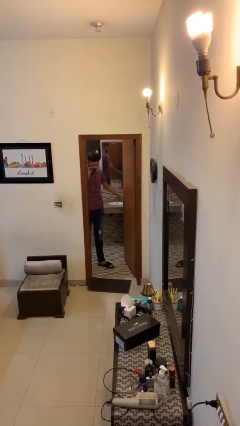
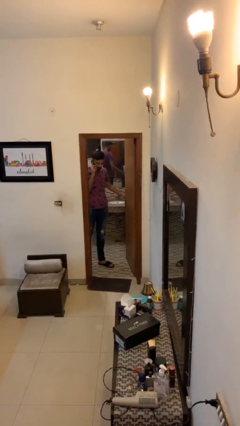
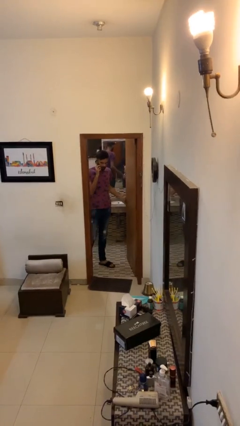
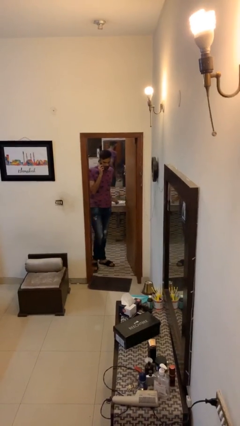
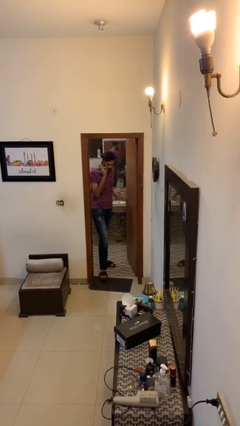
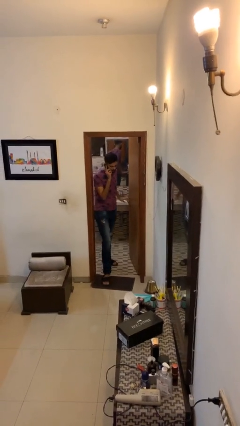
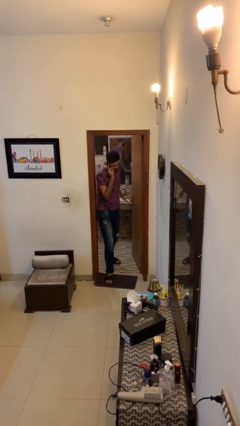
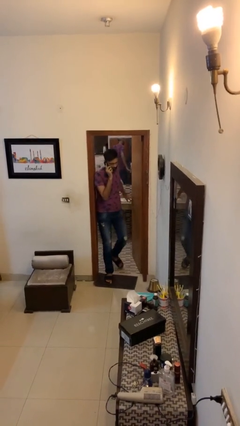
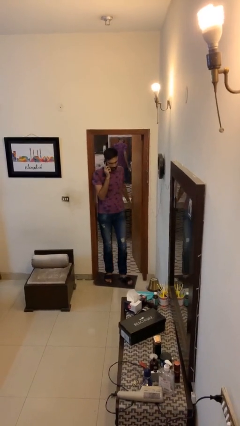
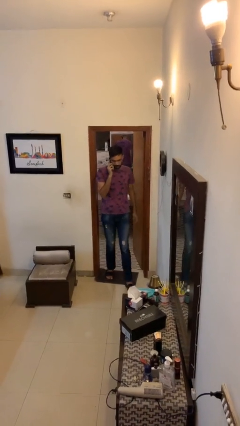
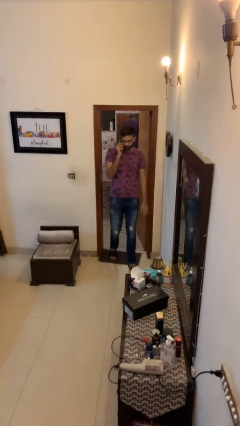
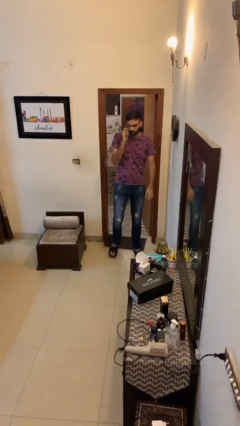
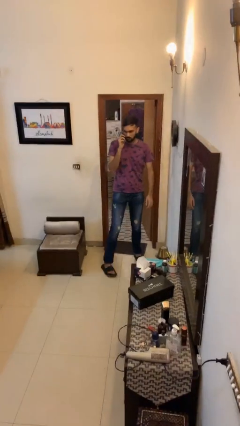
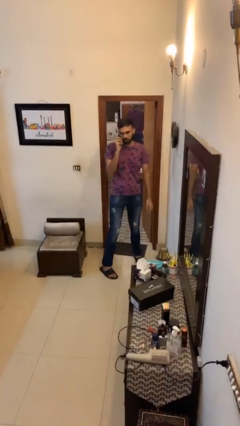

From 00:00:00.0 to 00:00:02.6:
person enters scene through structure

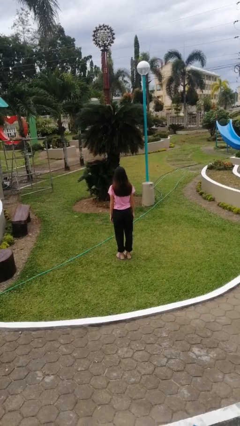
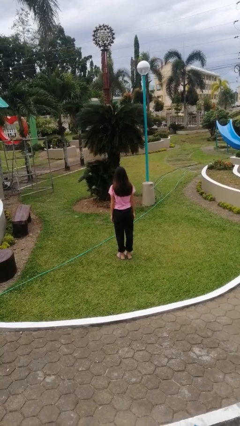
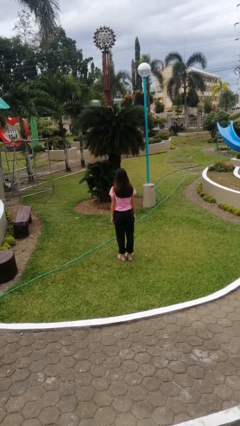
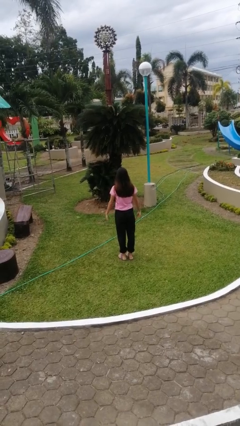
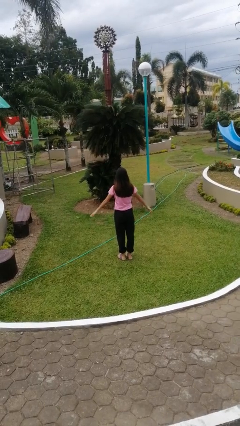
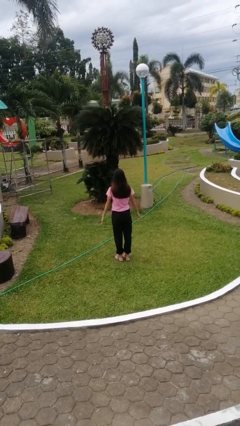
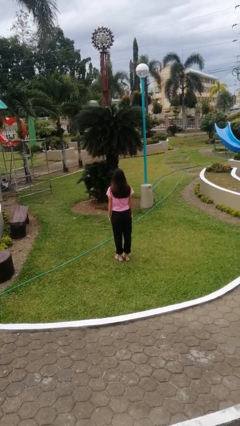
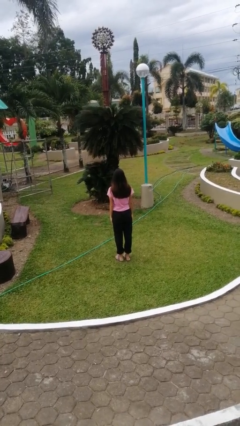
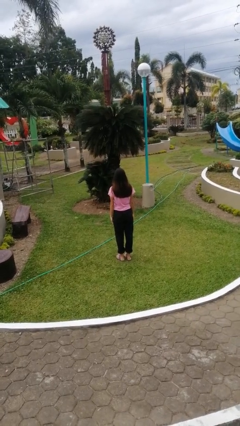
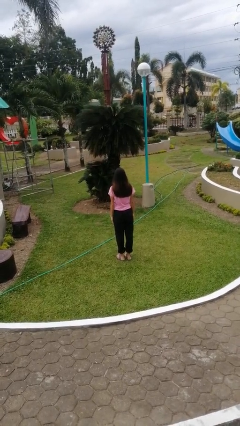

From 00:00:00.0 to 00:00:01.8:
person slaps hands on thighs

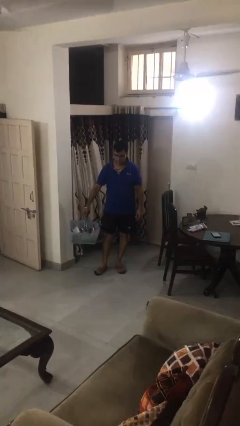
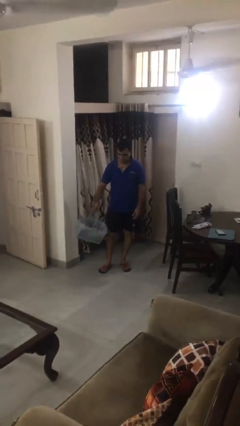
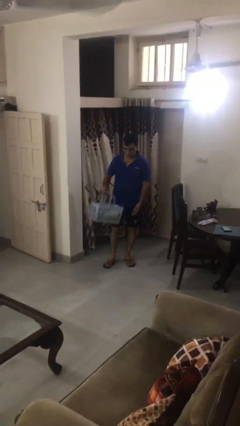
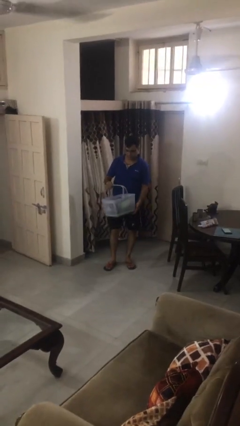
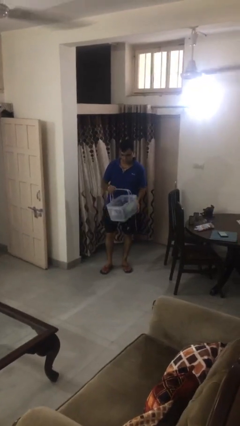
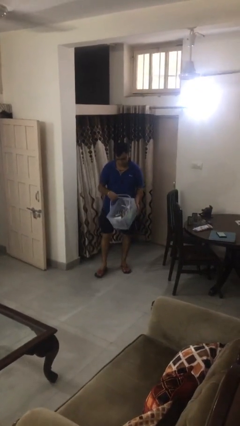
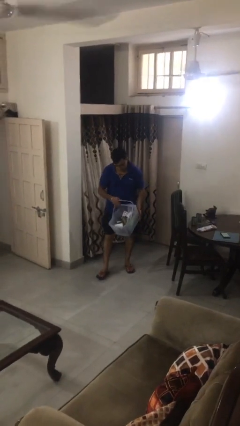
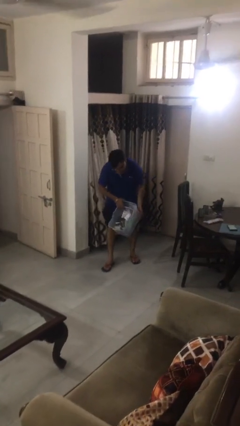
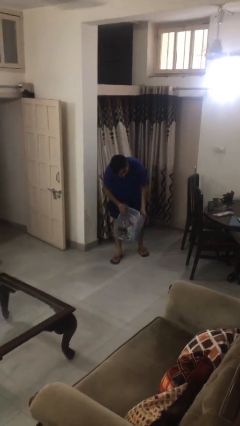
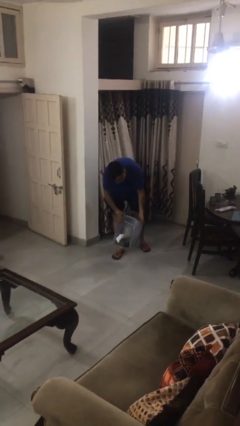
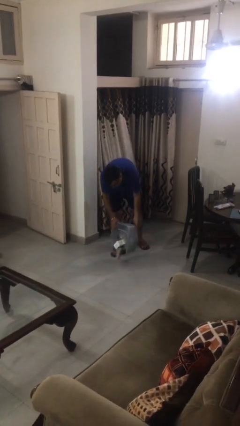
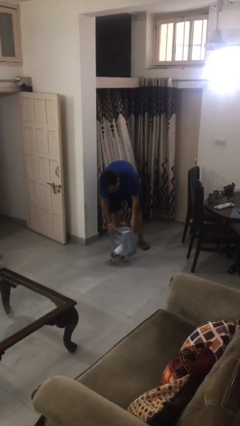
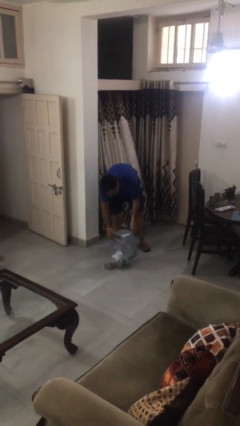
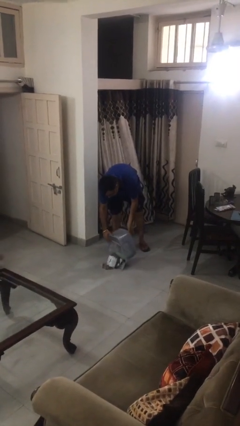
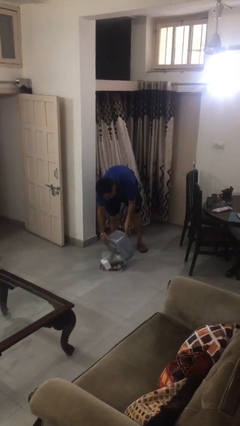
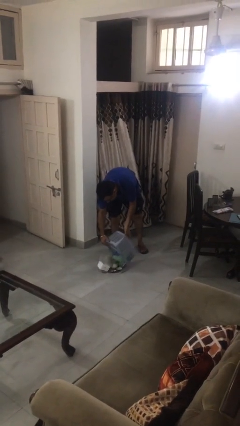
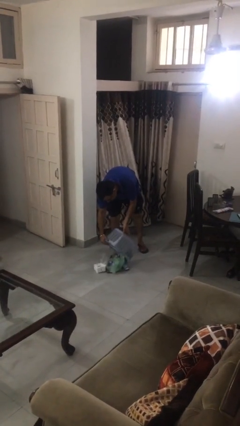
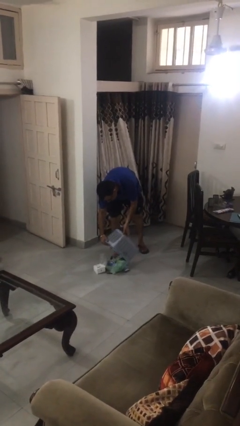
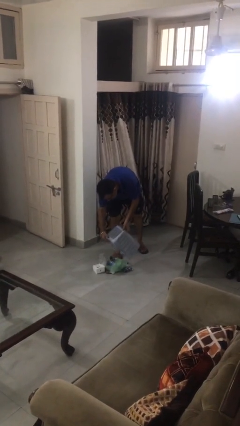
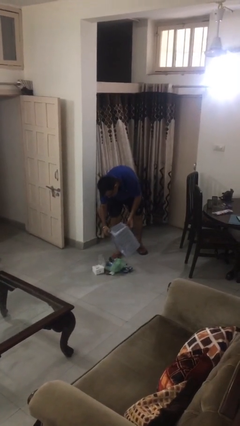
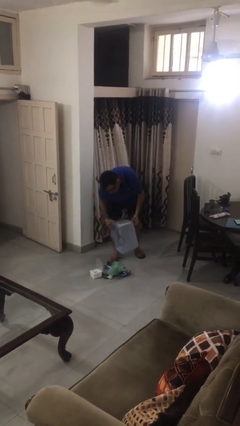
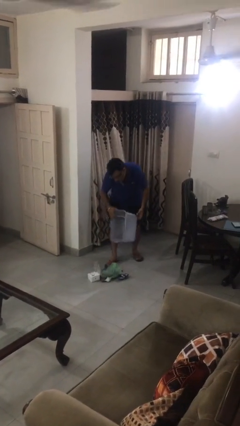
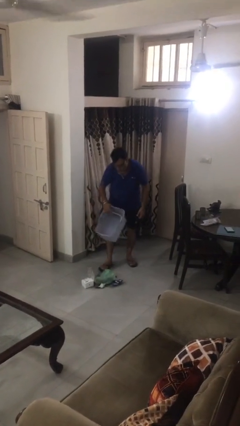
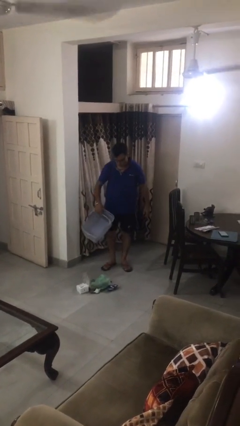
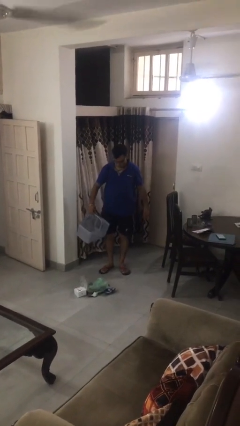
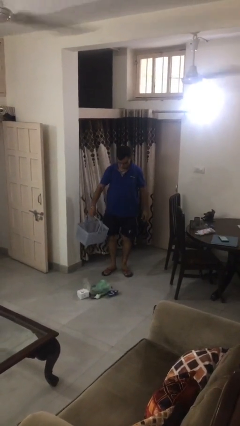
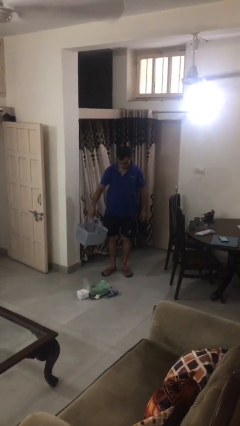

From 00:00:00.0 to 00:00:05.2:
person unloads box onto floor

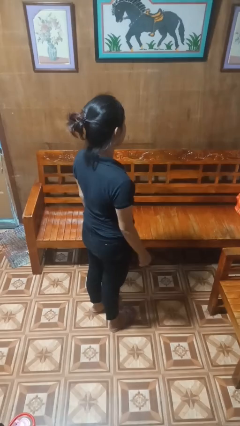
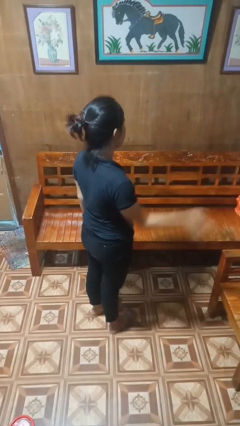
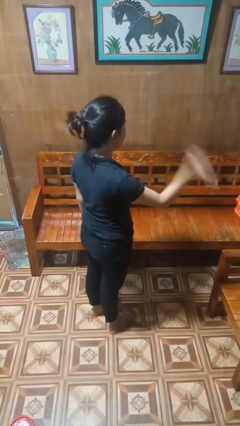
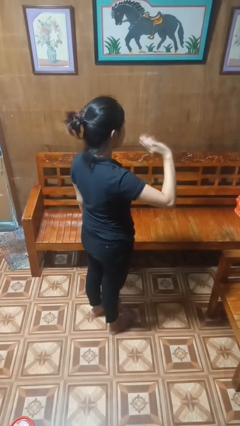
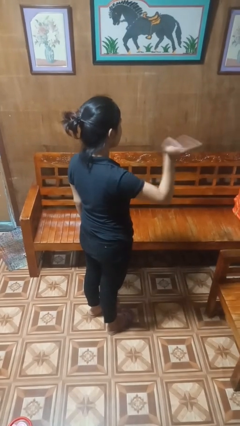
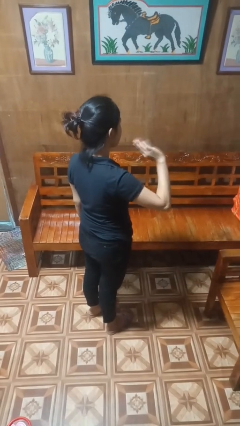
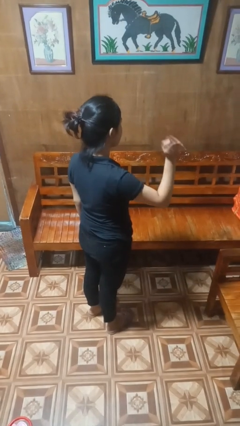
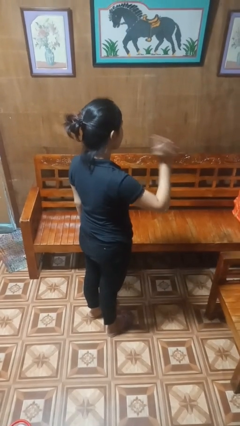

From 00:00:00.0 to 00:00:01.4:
person waves at person

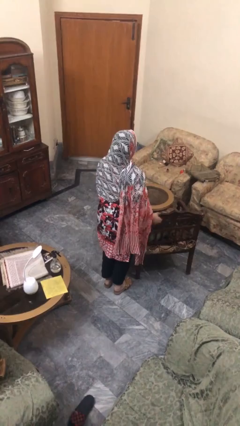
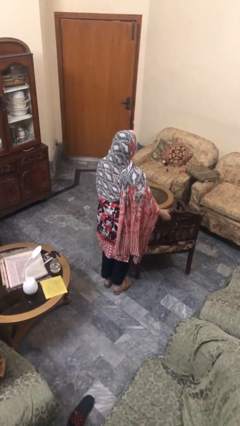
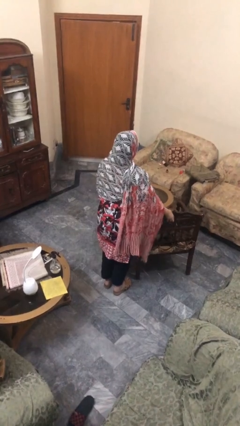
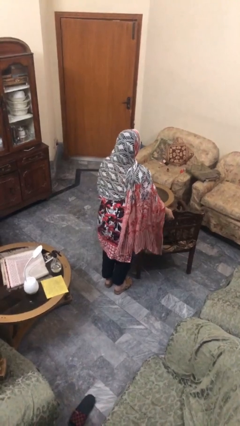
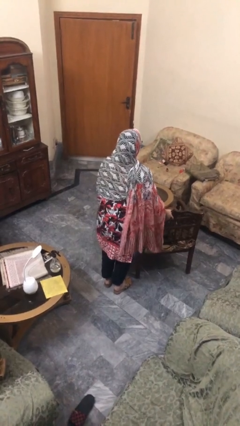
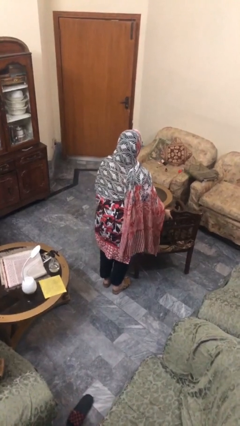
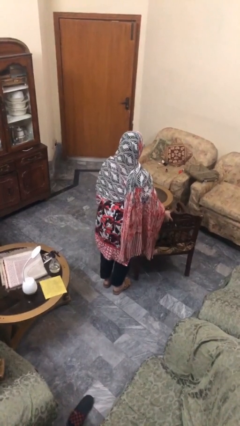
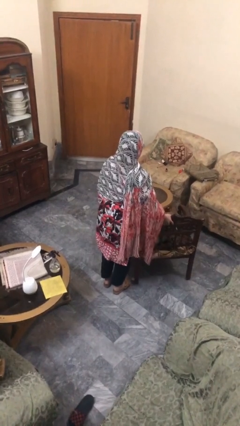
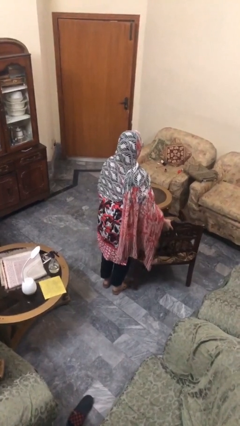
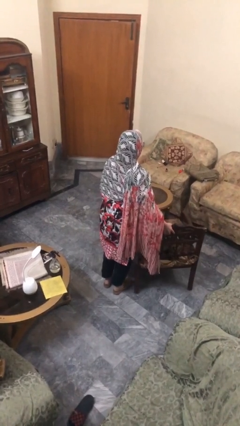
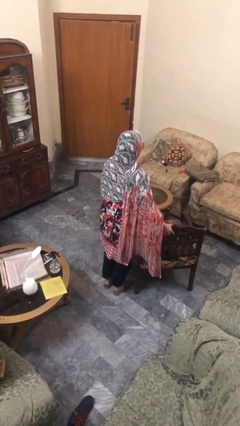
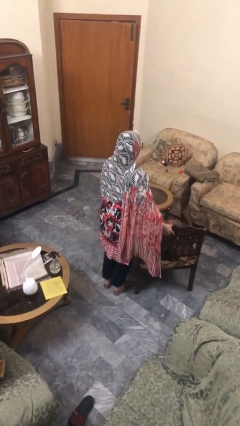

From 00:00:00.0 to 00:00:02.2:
person pulls out chair

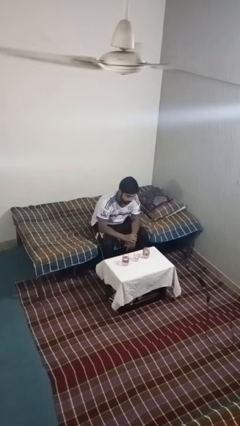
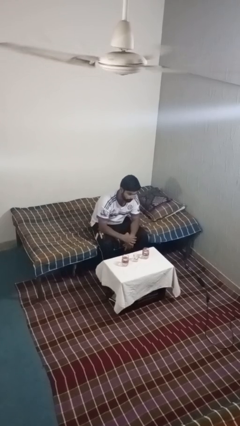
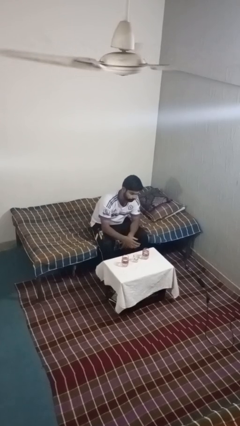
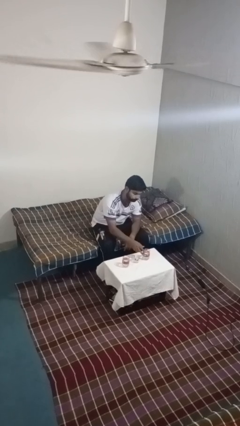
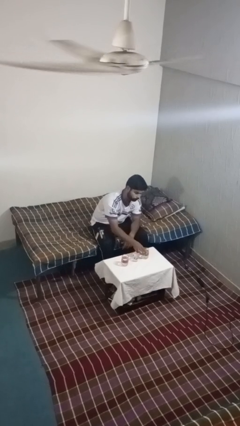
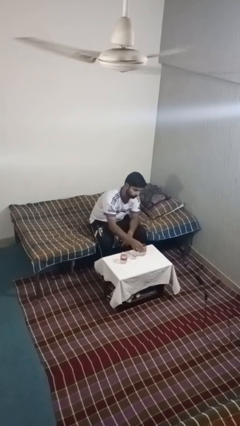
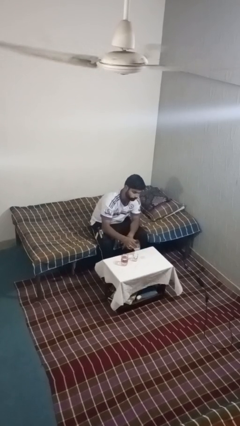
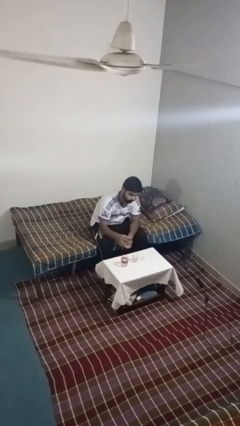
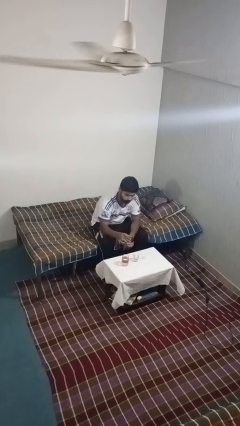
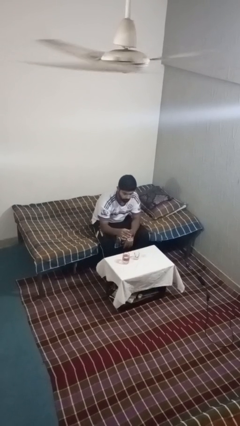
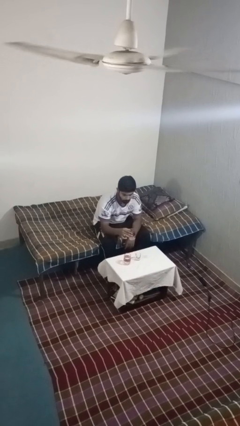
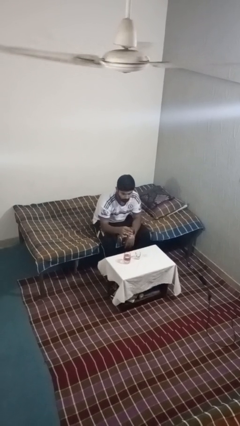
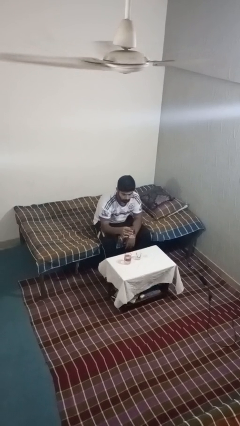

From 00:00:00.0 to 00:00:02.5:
person picks up object from table

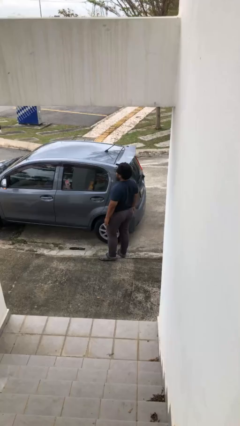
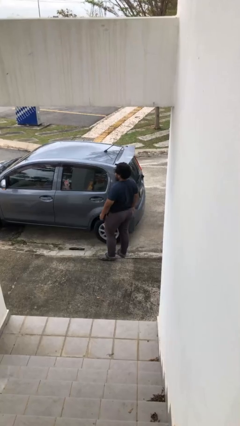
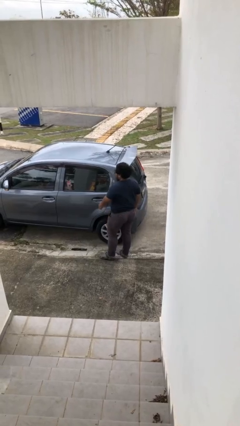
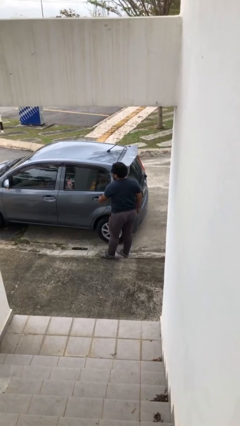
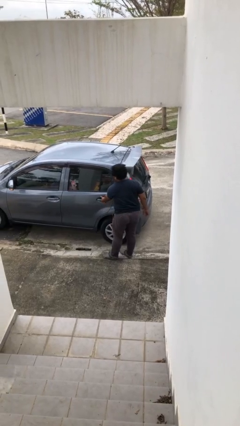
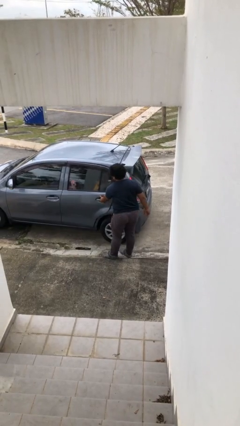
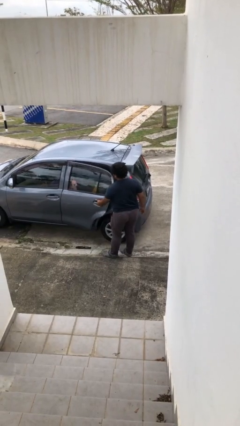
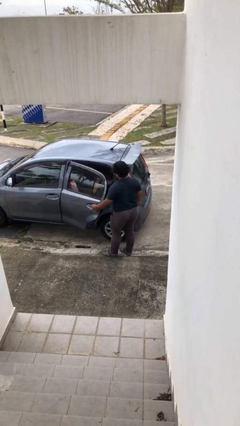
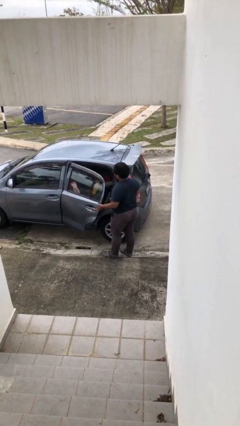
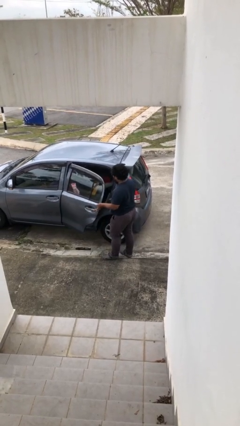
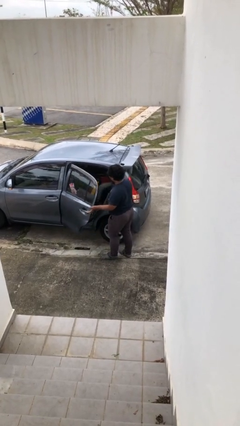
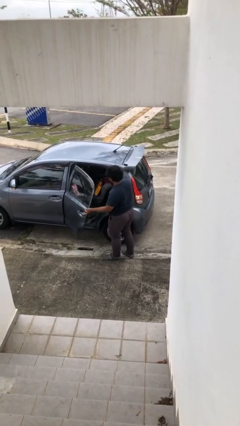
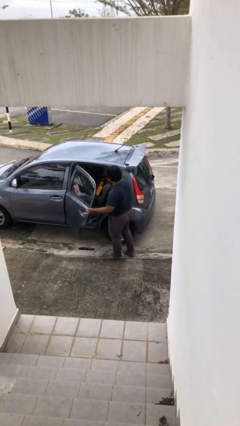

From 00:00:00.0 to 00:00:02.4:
person opens car door
